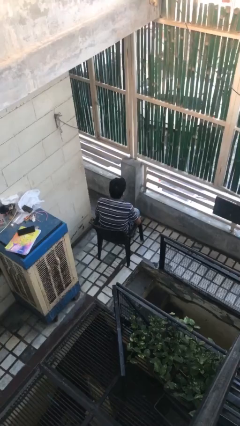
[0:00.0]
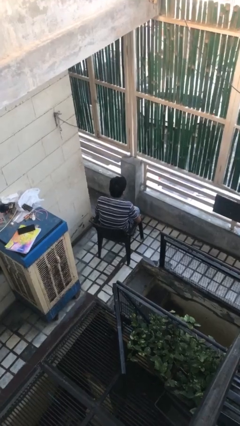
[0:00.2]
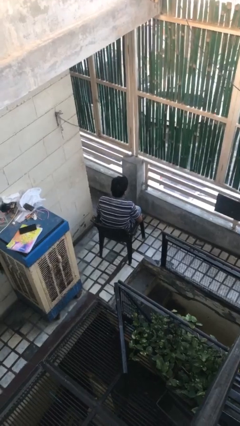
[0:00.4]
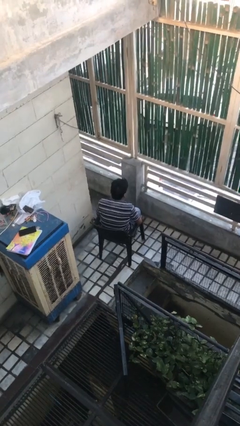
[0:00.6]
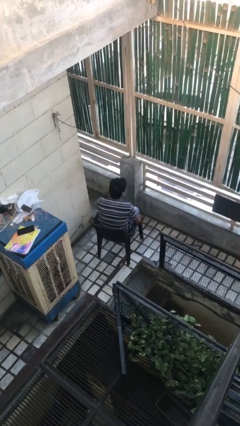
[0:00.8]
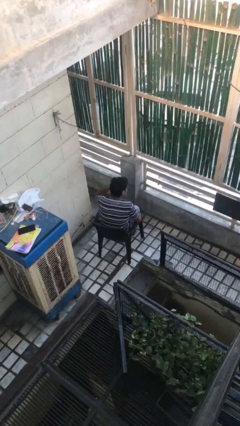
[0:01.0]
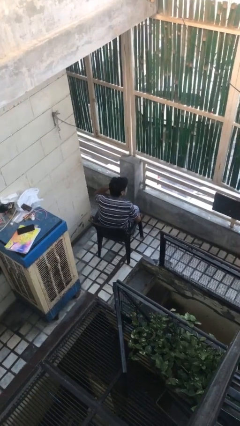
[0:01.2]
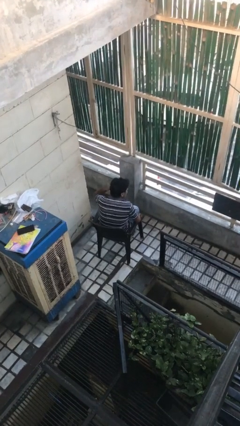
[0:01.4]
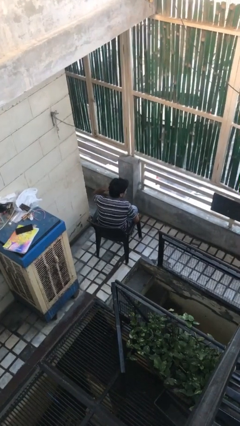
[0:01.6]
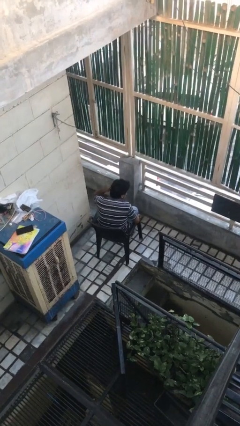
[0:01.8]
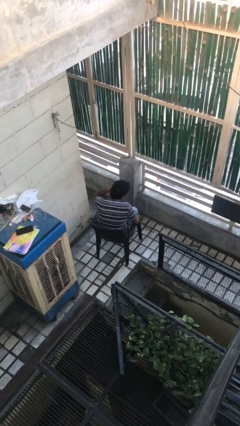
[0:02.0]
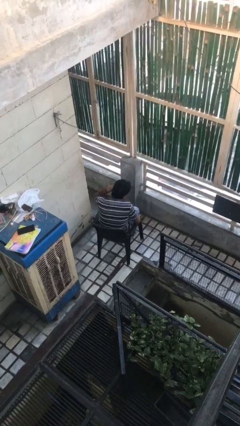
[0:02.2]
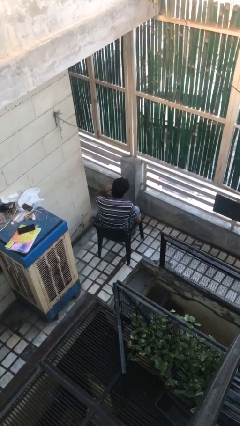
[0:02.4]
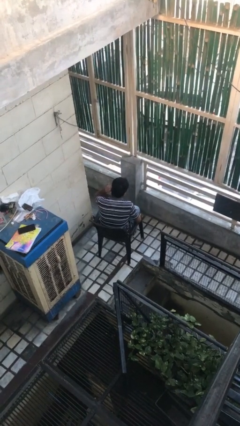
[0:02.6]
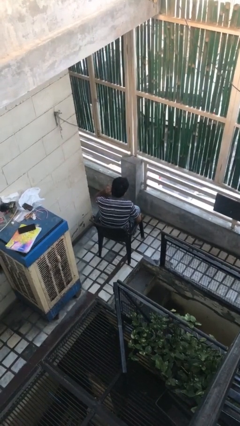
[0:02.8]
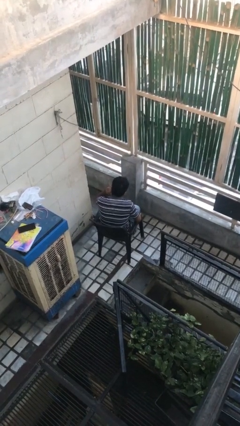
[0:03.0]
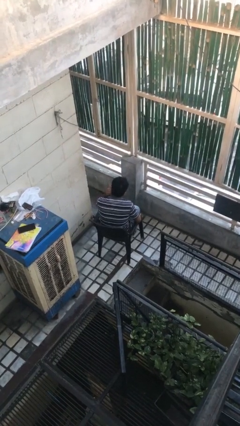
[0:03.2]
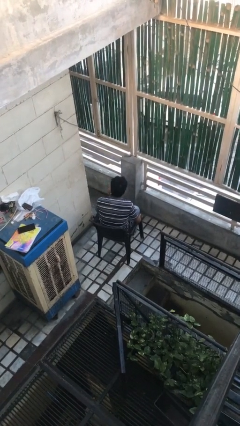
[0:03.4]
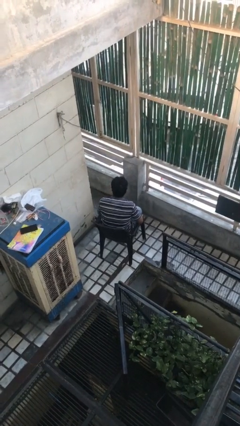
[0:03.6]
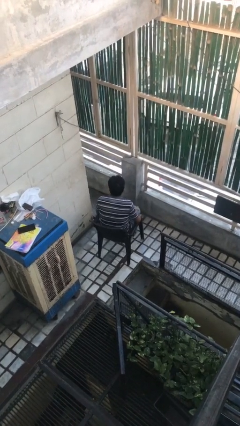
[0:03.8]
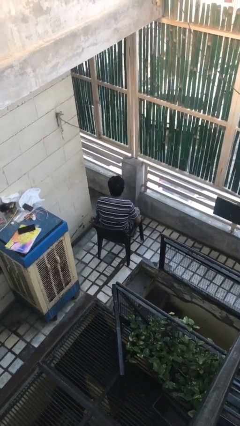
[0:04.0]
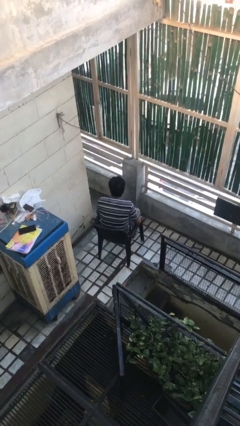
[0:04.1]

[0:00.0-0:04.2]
person strokes hair

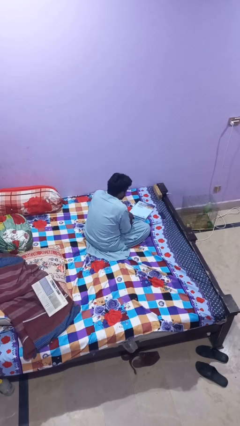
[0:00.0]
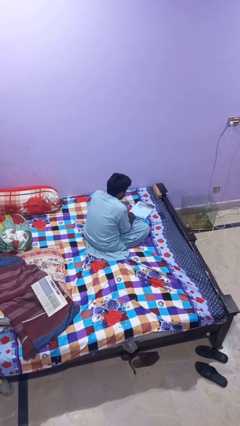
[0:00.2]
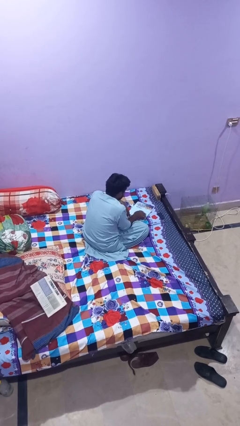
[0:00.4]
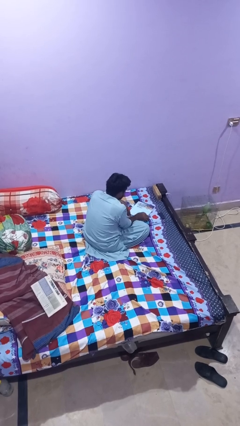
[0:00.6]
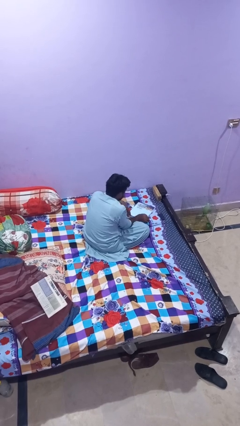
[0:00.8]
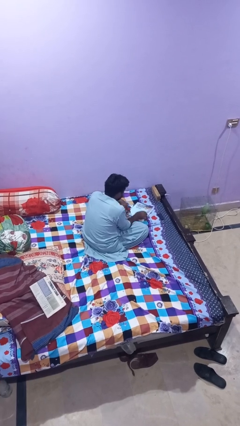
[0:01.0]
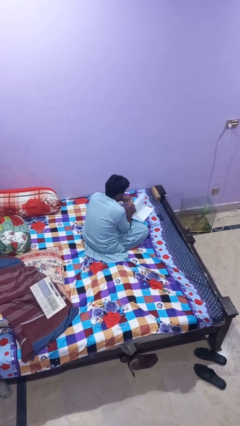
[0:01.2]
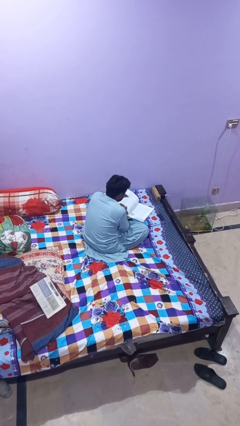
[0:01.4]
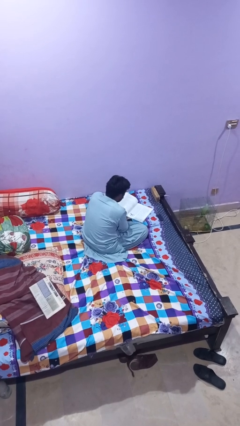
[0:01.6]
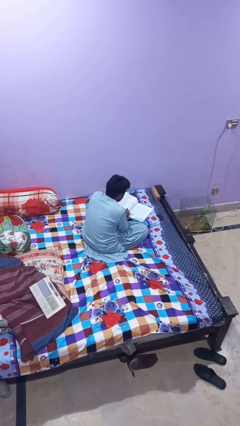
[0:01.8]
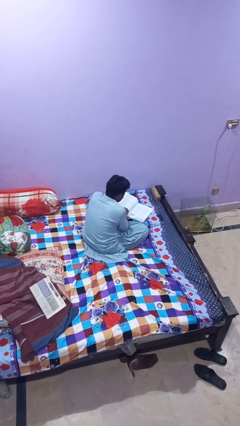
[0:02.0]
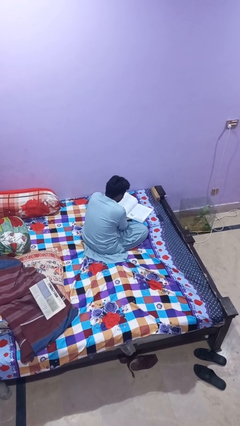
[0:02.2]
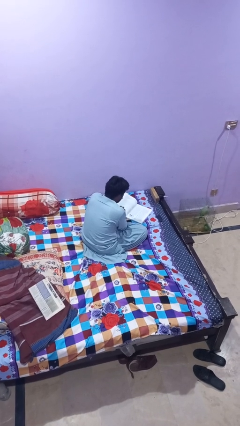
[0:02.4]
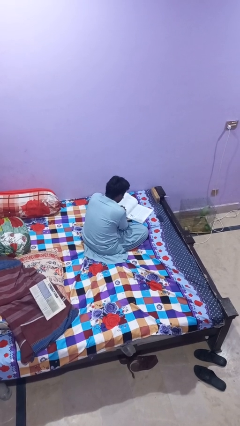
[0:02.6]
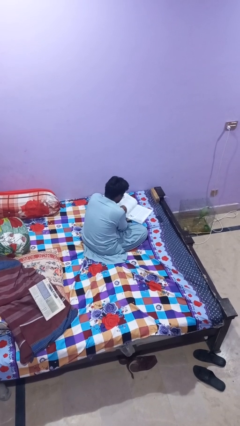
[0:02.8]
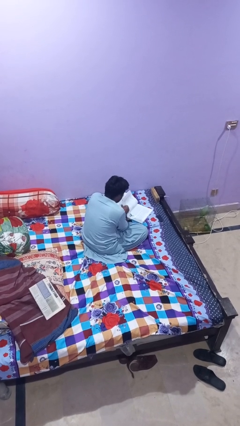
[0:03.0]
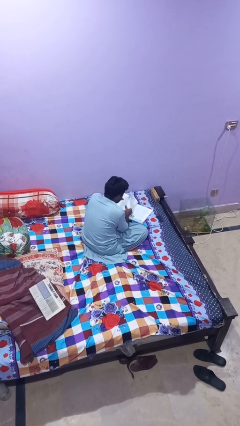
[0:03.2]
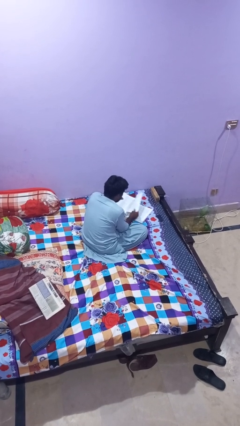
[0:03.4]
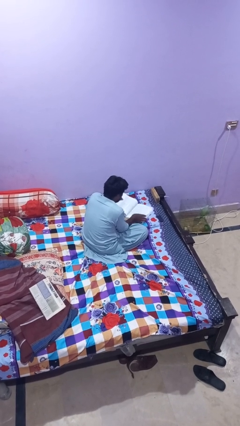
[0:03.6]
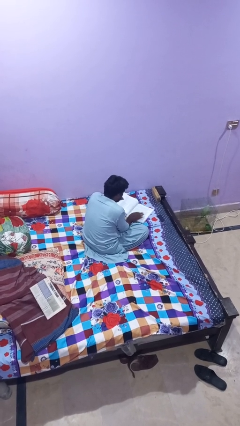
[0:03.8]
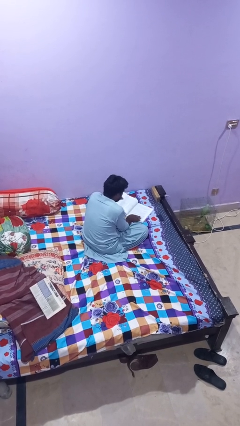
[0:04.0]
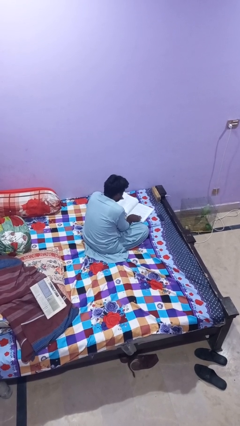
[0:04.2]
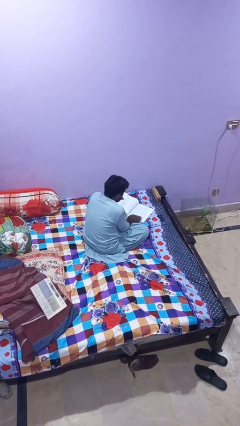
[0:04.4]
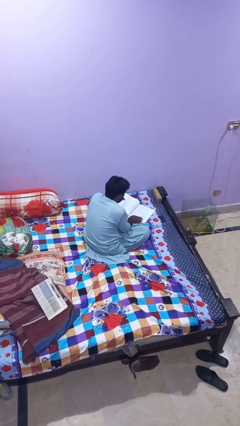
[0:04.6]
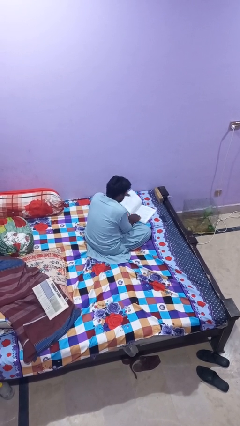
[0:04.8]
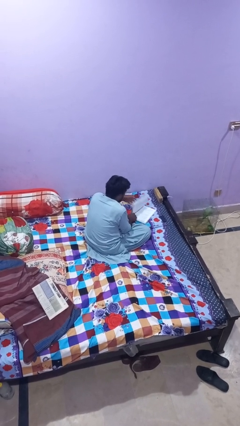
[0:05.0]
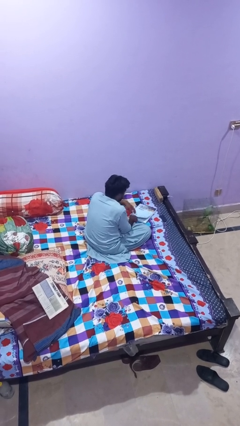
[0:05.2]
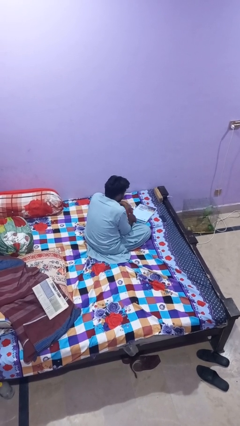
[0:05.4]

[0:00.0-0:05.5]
person reads book

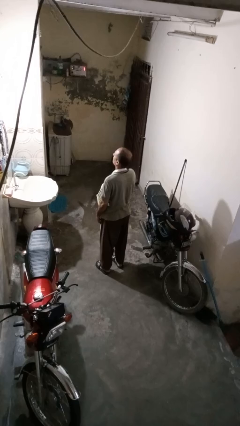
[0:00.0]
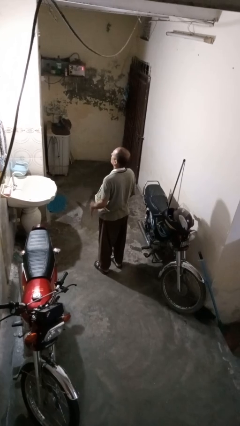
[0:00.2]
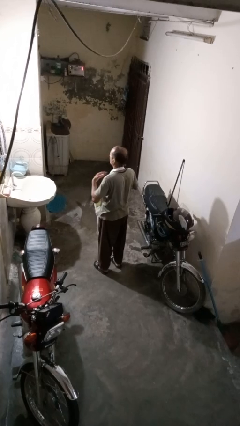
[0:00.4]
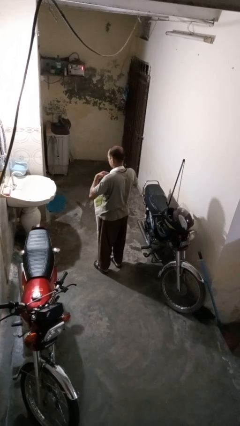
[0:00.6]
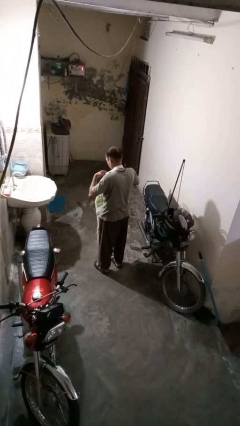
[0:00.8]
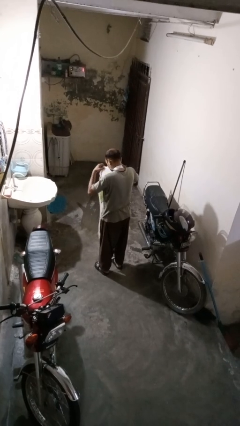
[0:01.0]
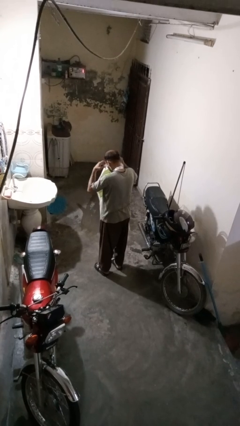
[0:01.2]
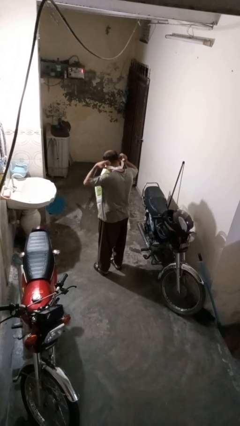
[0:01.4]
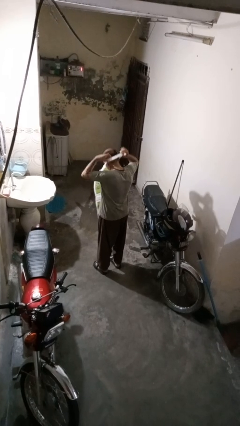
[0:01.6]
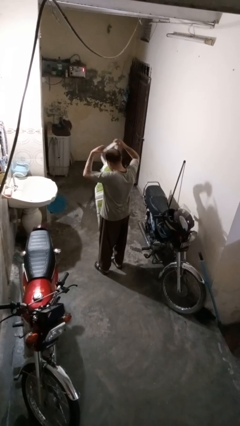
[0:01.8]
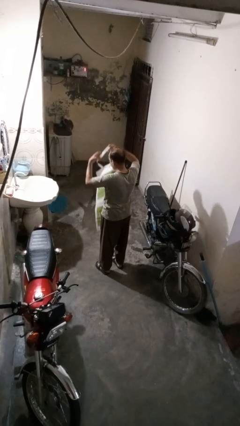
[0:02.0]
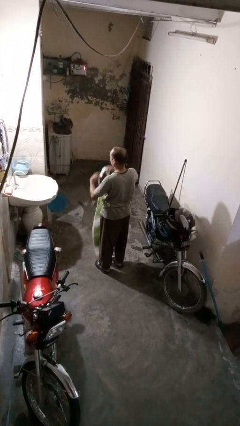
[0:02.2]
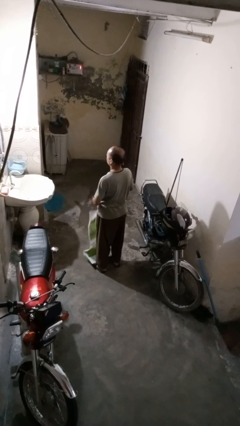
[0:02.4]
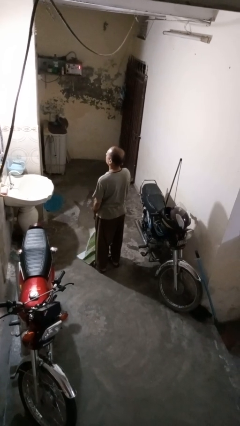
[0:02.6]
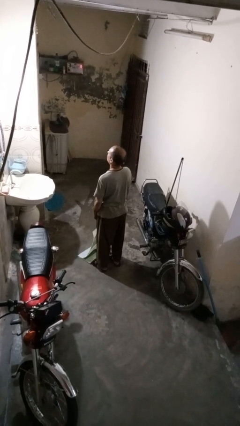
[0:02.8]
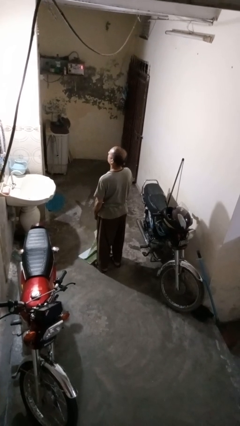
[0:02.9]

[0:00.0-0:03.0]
person takes off apron

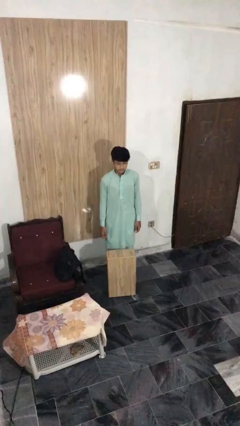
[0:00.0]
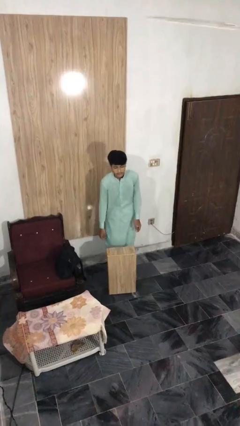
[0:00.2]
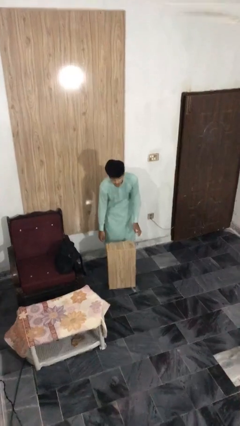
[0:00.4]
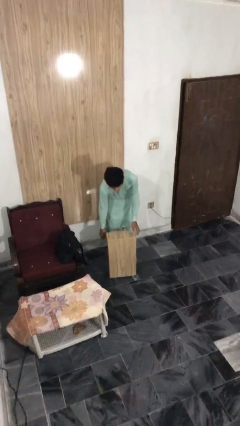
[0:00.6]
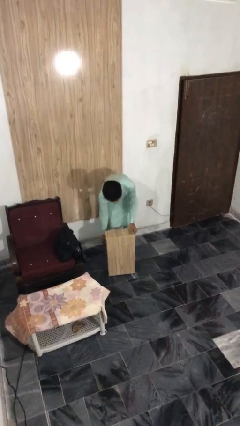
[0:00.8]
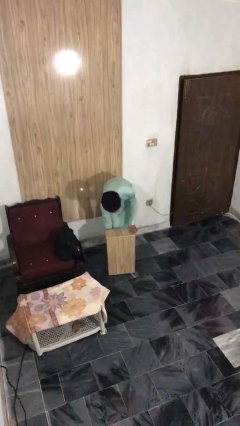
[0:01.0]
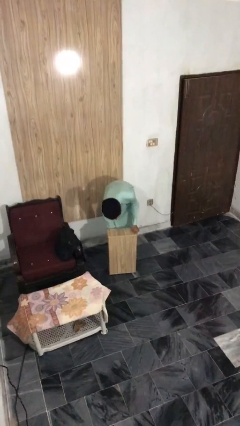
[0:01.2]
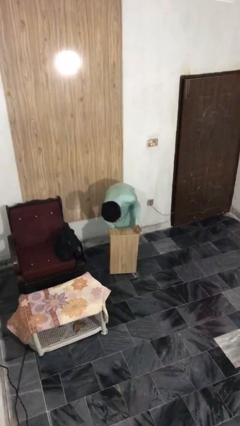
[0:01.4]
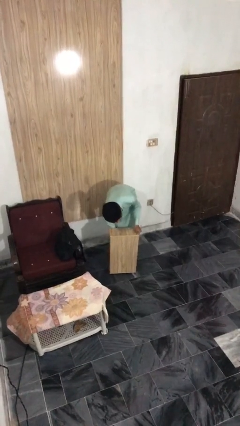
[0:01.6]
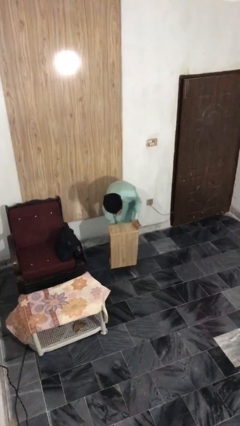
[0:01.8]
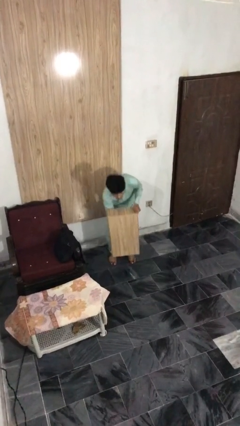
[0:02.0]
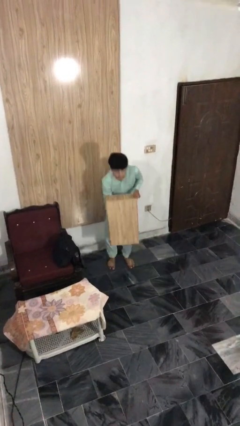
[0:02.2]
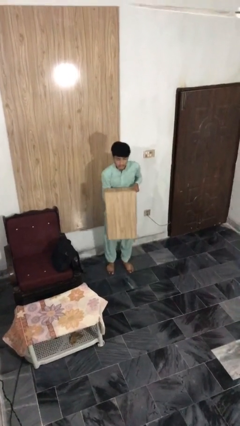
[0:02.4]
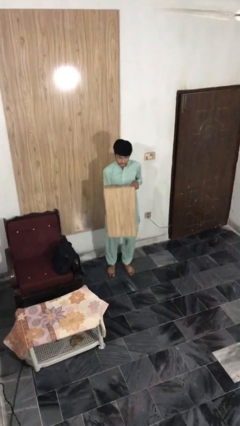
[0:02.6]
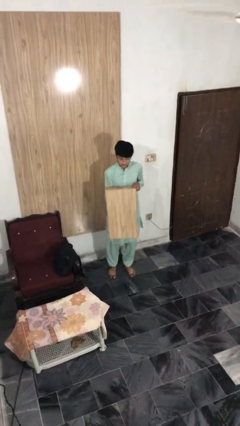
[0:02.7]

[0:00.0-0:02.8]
person picks up object from floor

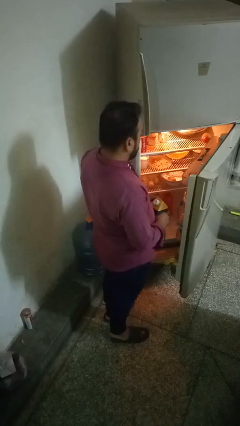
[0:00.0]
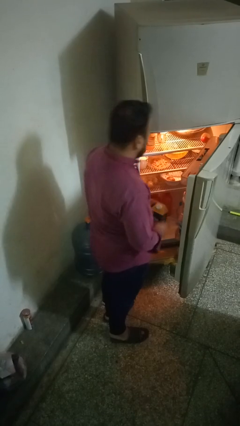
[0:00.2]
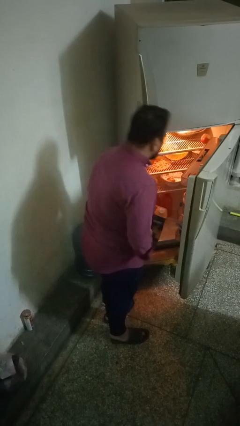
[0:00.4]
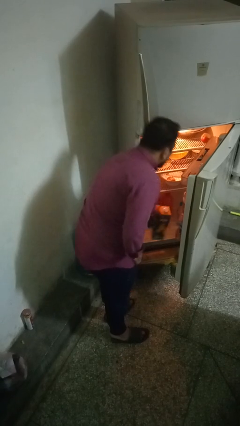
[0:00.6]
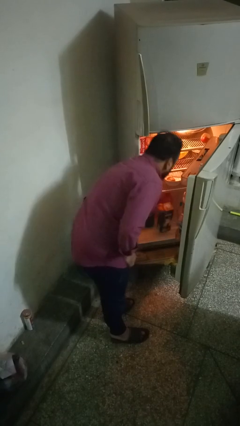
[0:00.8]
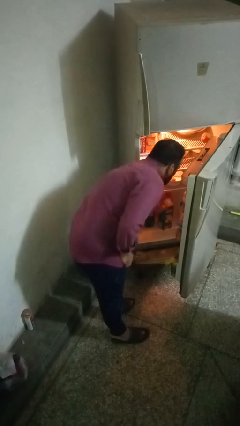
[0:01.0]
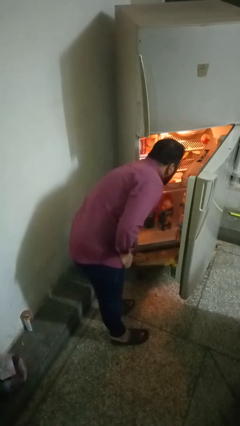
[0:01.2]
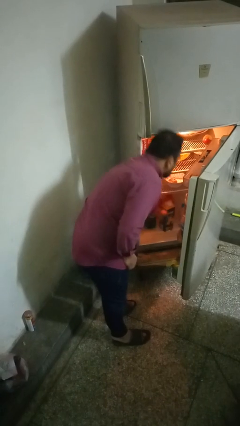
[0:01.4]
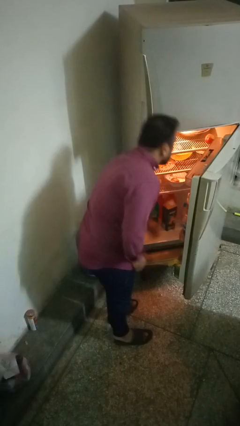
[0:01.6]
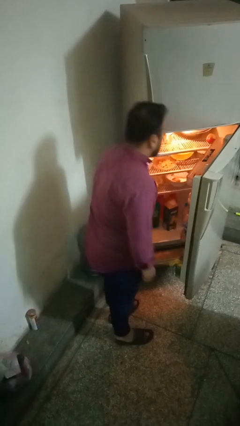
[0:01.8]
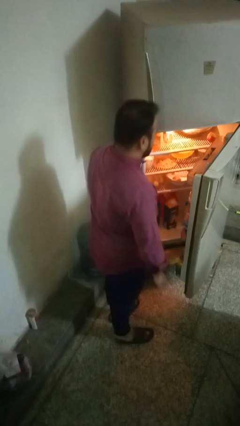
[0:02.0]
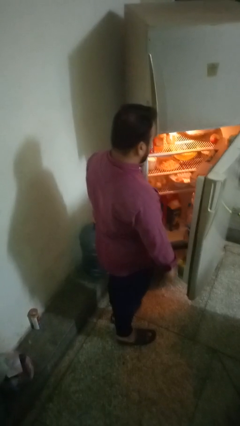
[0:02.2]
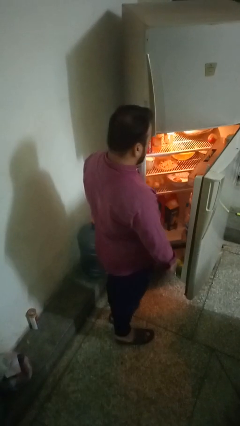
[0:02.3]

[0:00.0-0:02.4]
person puts object into refrigerator
